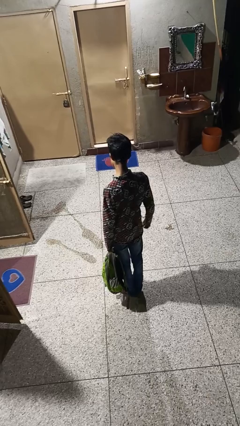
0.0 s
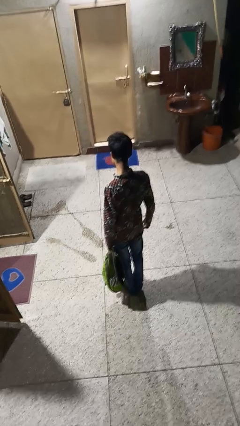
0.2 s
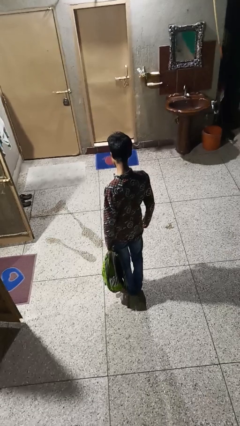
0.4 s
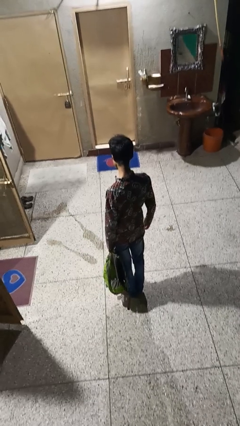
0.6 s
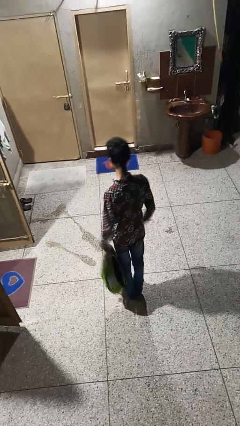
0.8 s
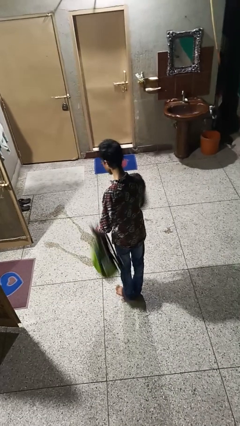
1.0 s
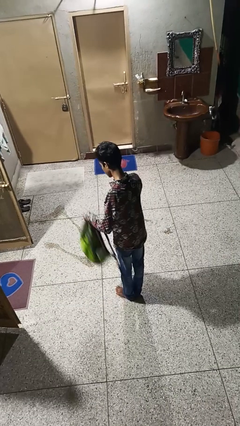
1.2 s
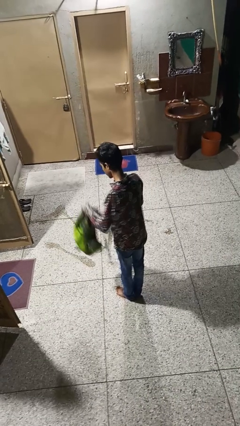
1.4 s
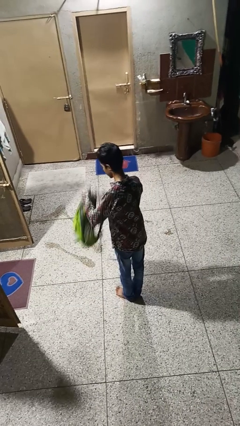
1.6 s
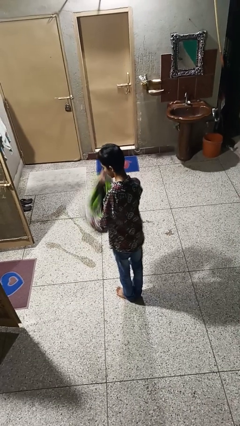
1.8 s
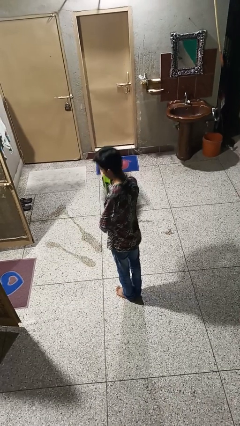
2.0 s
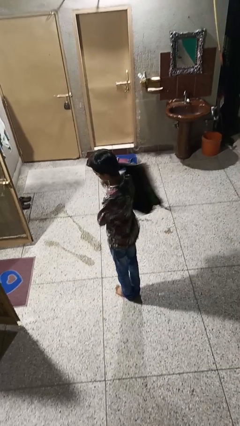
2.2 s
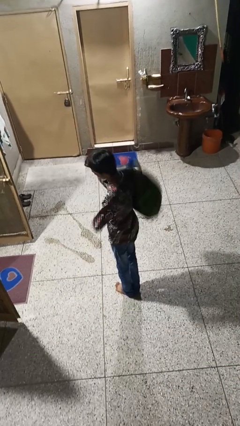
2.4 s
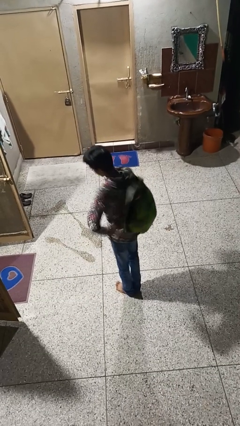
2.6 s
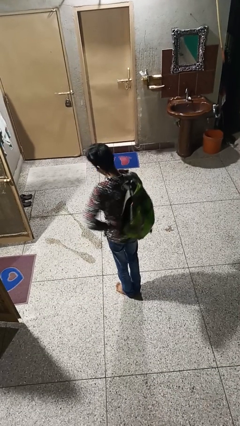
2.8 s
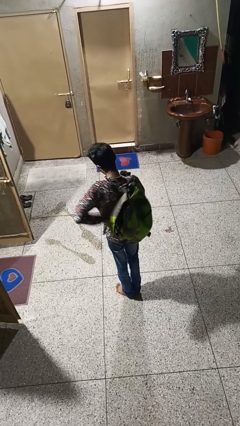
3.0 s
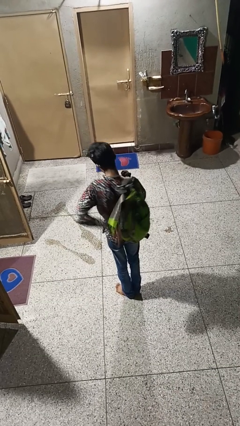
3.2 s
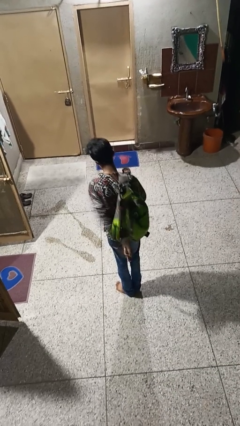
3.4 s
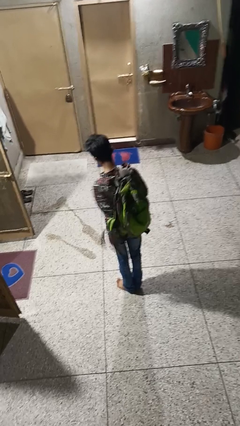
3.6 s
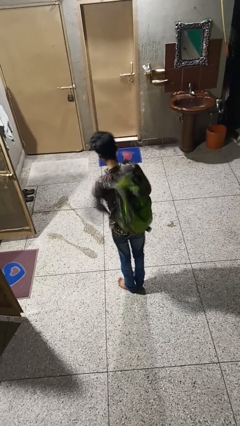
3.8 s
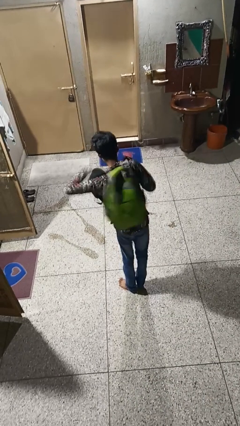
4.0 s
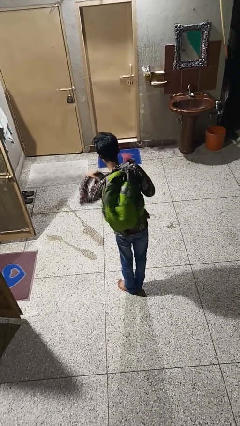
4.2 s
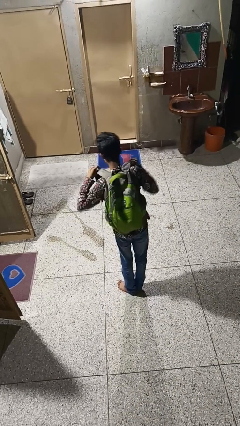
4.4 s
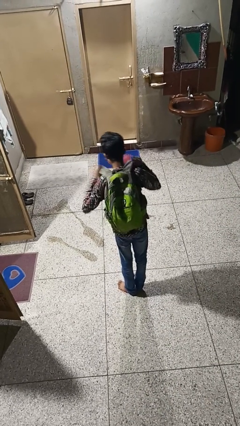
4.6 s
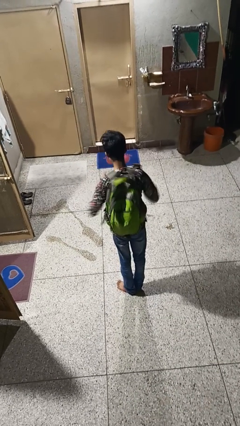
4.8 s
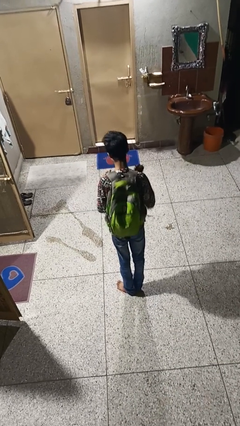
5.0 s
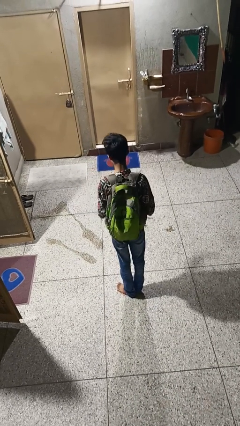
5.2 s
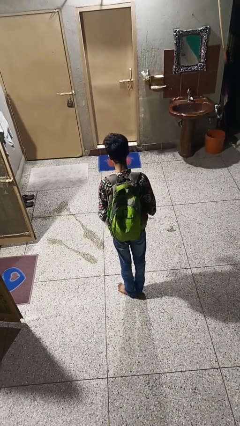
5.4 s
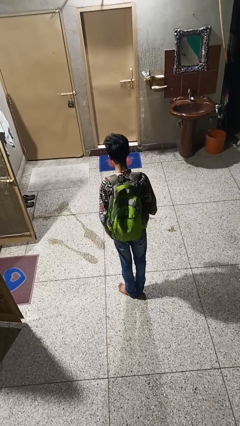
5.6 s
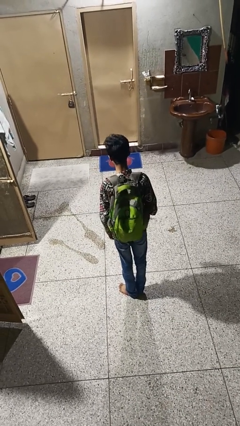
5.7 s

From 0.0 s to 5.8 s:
person puts on backpack

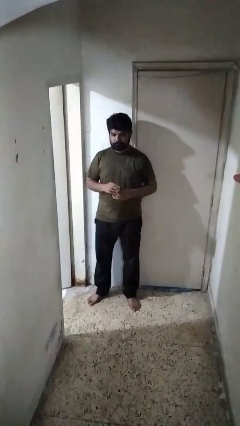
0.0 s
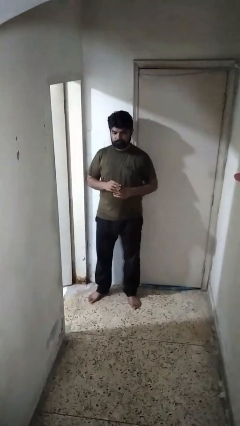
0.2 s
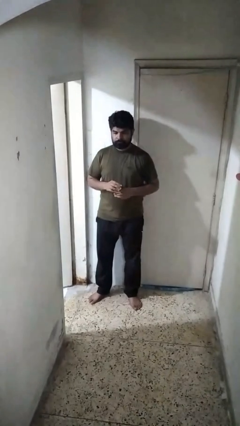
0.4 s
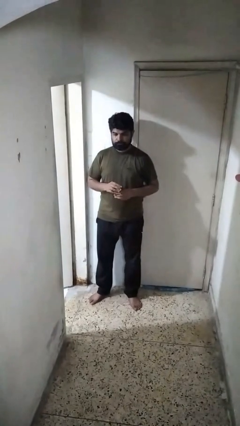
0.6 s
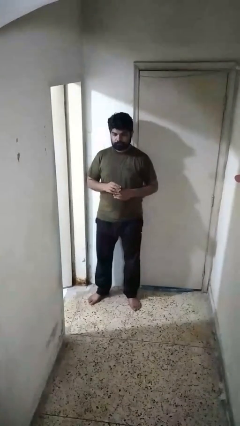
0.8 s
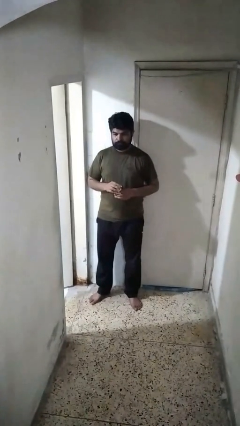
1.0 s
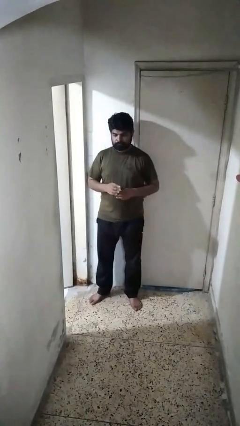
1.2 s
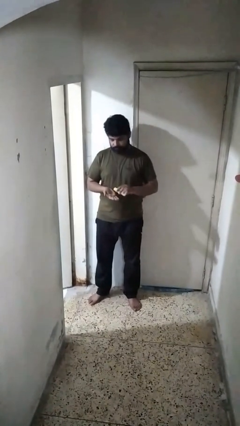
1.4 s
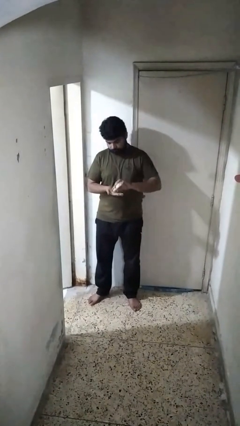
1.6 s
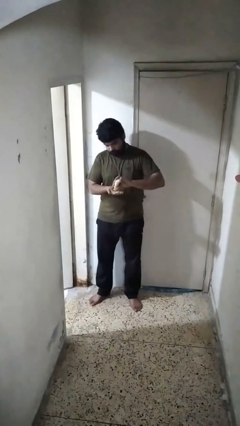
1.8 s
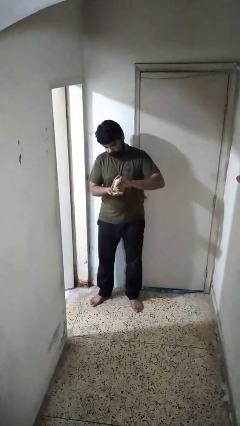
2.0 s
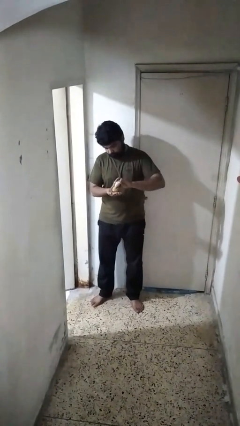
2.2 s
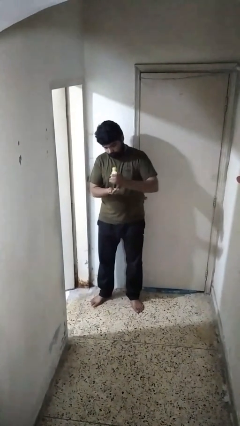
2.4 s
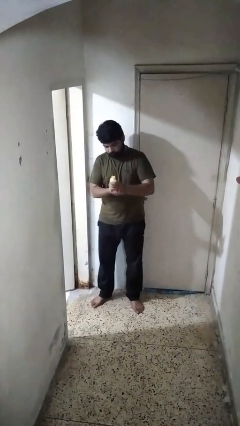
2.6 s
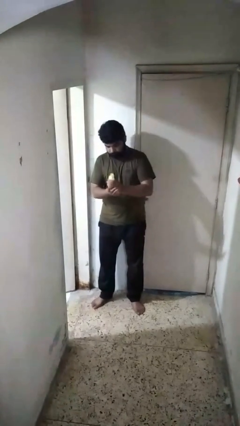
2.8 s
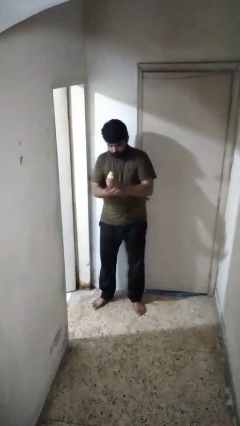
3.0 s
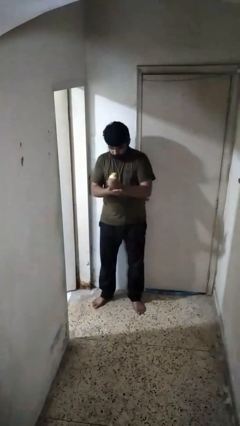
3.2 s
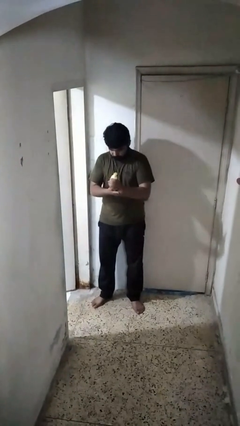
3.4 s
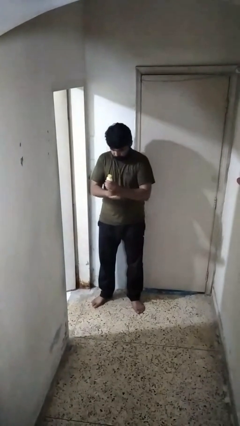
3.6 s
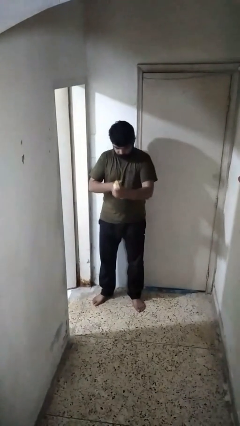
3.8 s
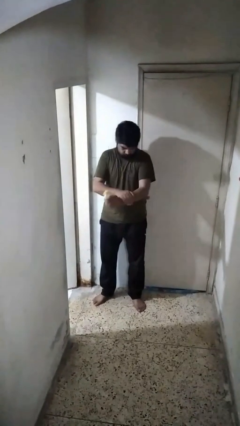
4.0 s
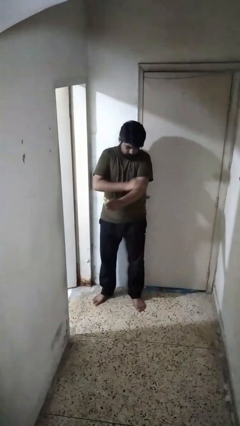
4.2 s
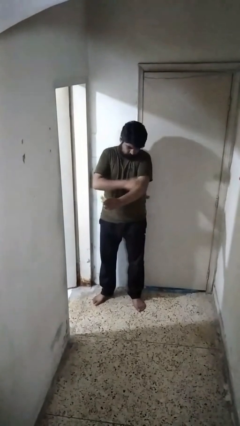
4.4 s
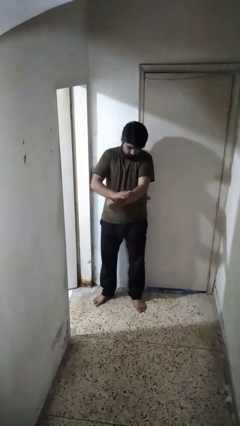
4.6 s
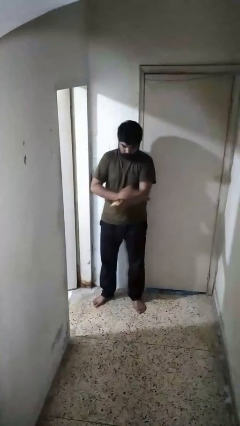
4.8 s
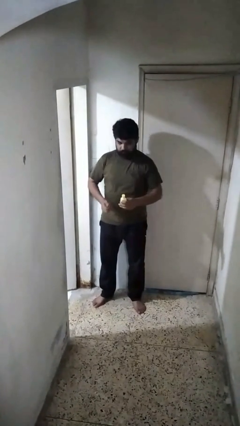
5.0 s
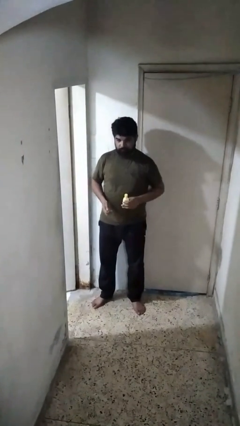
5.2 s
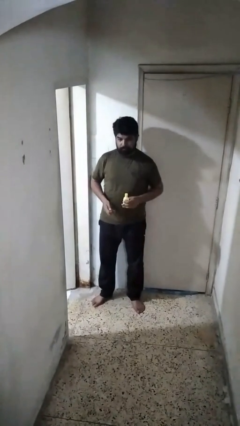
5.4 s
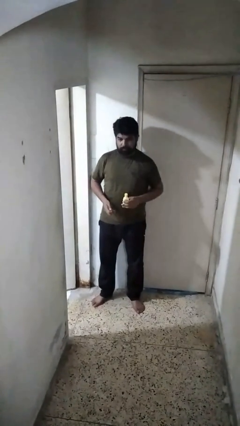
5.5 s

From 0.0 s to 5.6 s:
person applies sunscreen

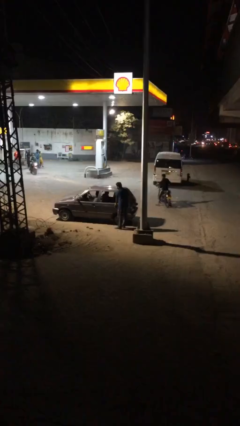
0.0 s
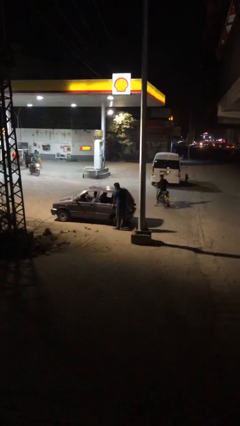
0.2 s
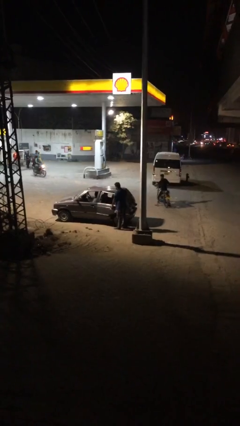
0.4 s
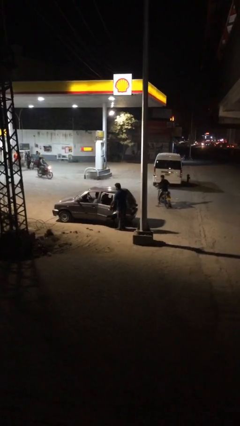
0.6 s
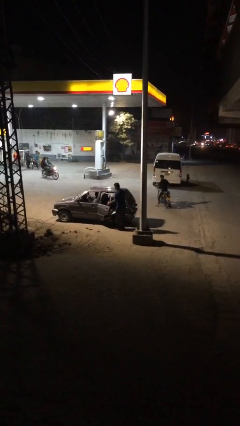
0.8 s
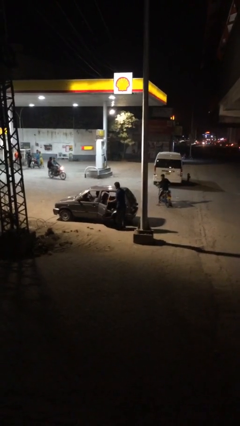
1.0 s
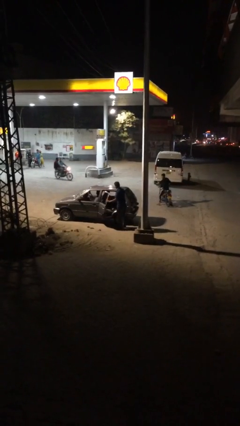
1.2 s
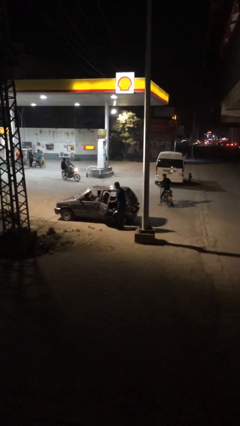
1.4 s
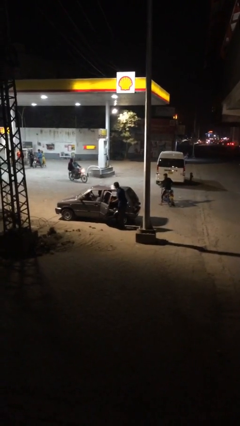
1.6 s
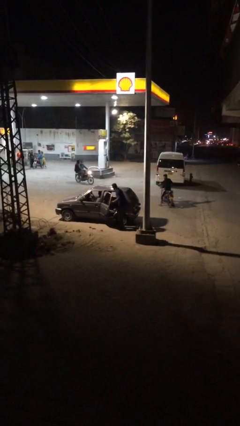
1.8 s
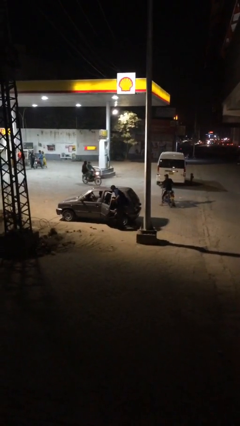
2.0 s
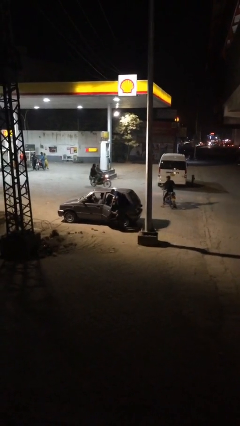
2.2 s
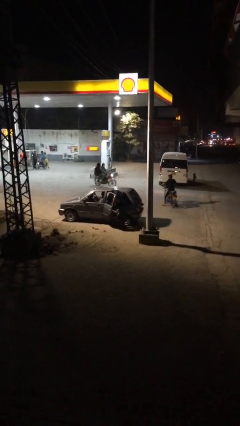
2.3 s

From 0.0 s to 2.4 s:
person opens car door

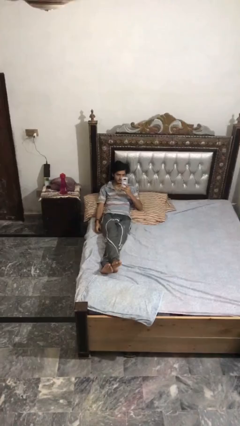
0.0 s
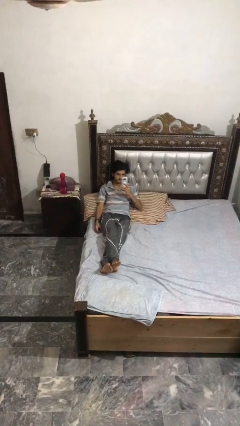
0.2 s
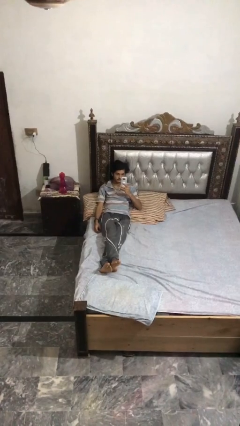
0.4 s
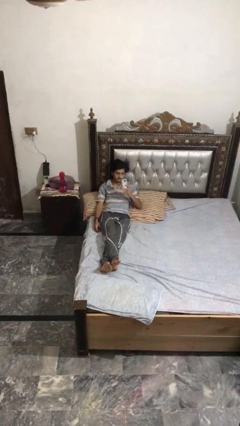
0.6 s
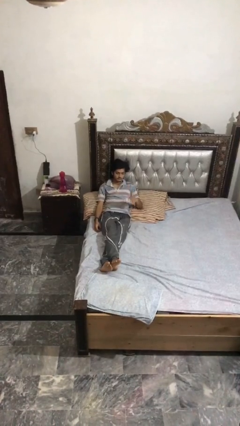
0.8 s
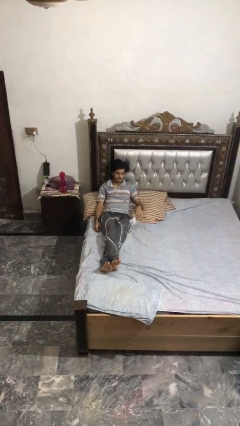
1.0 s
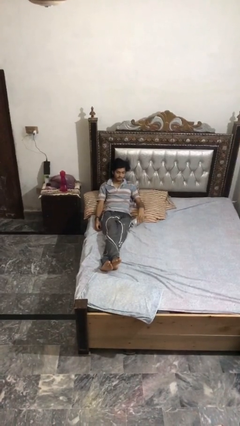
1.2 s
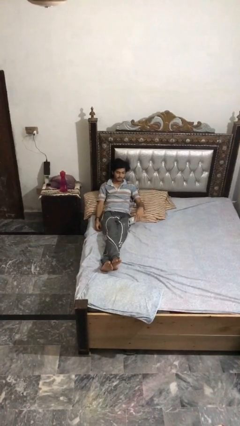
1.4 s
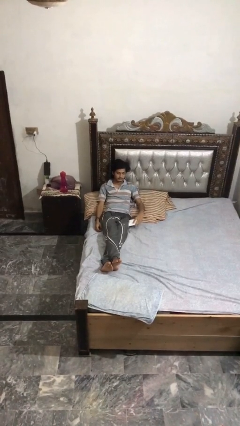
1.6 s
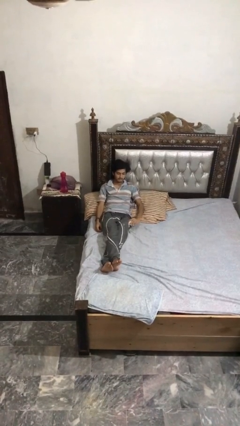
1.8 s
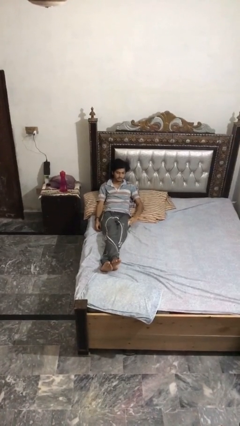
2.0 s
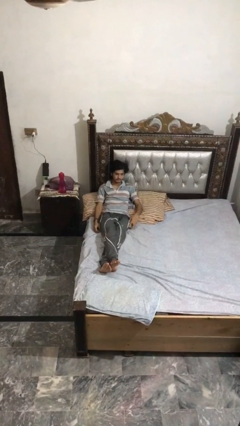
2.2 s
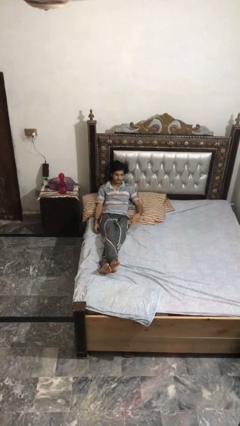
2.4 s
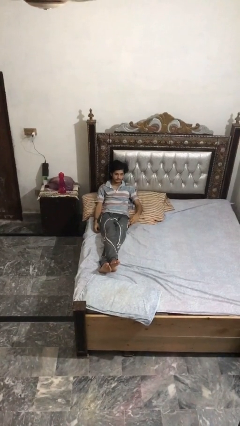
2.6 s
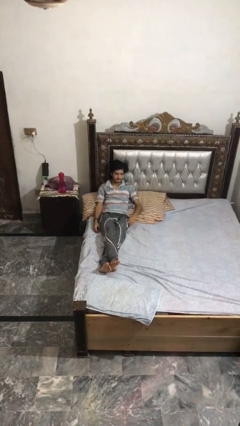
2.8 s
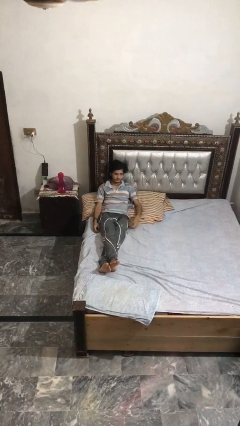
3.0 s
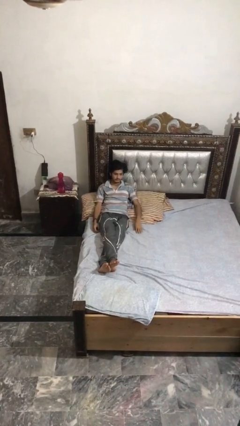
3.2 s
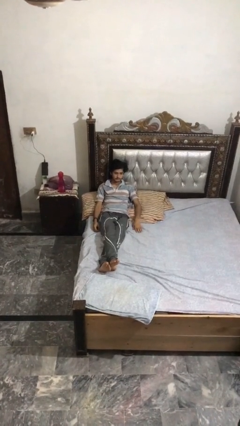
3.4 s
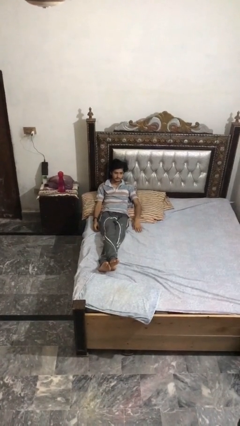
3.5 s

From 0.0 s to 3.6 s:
person puts phone into pocket
